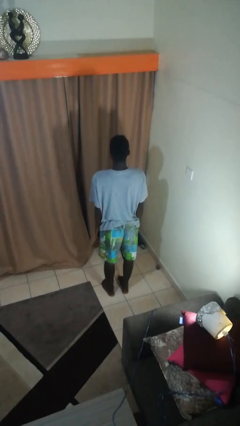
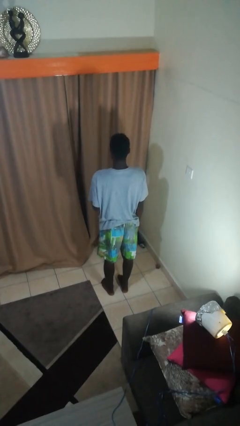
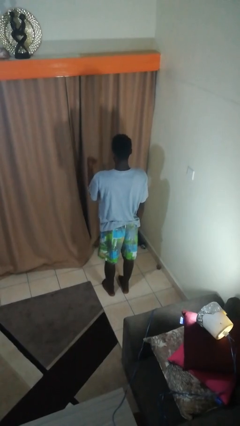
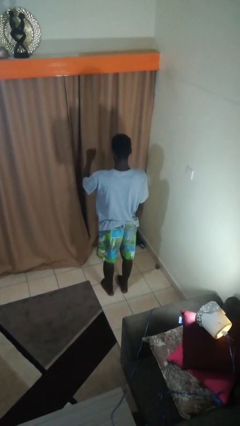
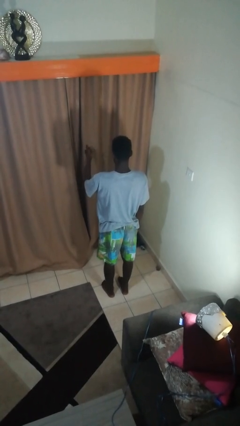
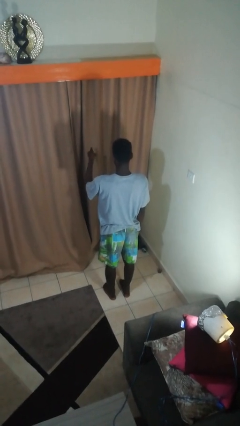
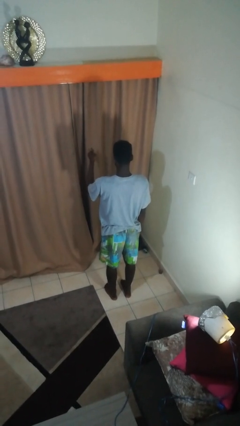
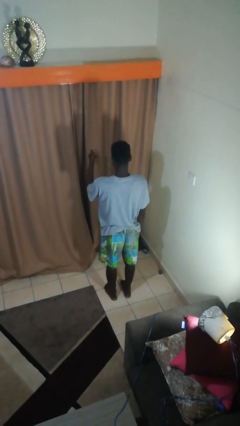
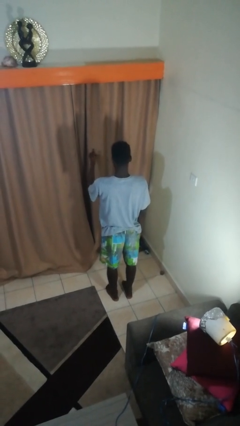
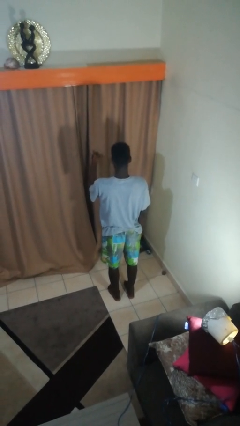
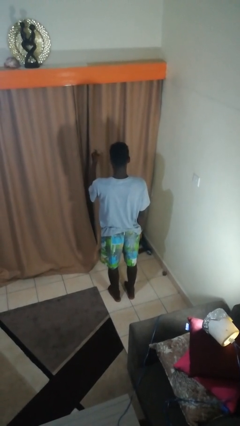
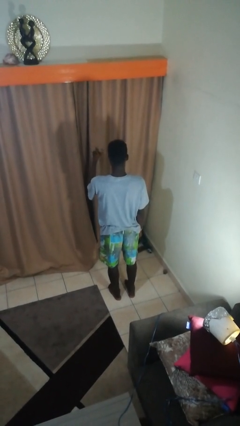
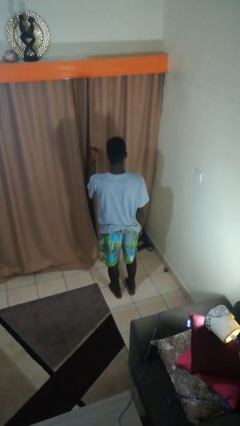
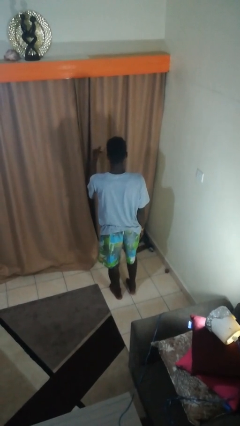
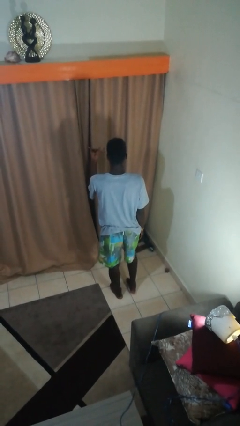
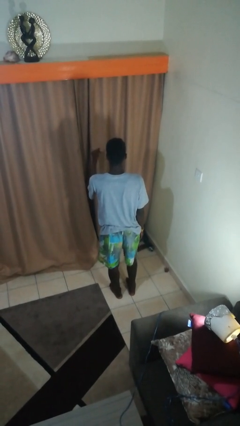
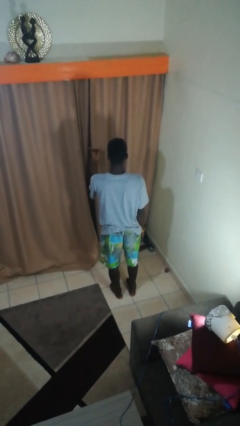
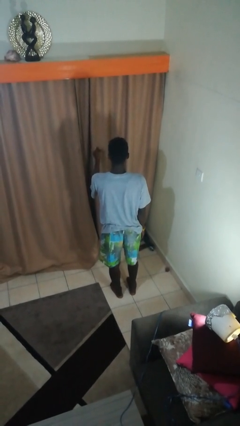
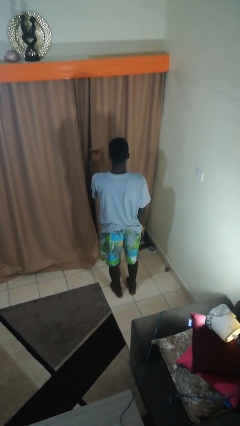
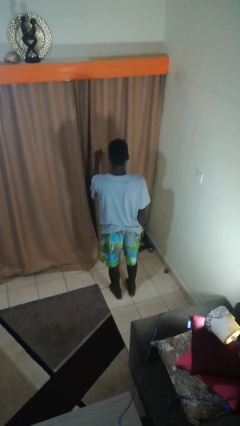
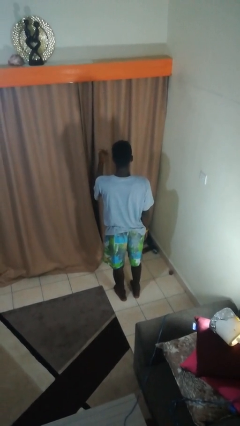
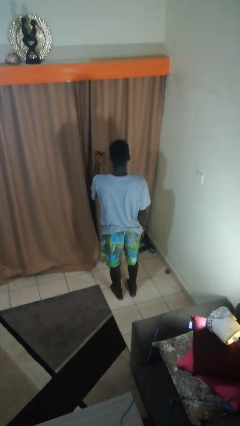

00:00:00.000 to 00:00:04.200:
person gestures hang loose

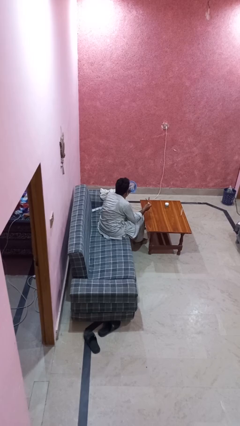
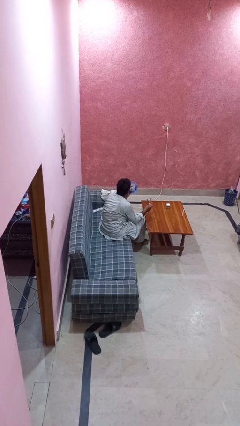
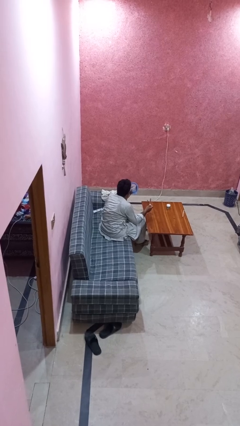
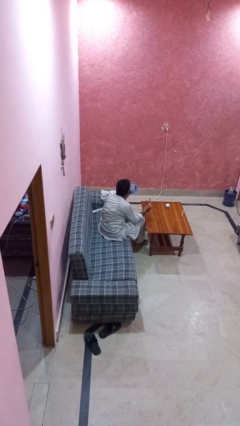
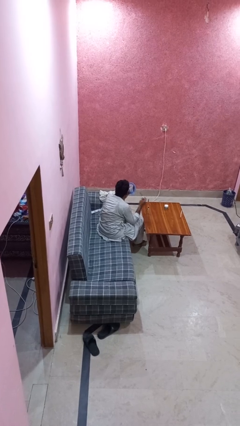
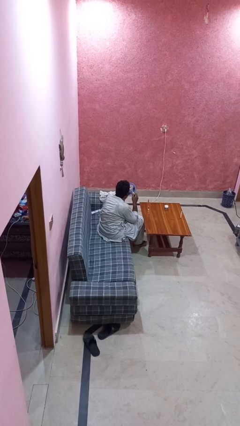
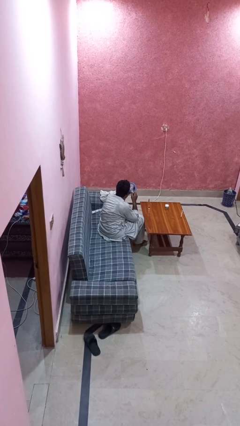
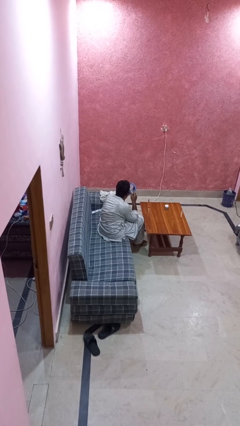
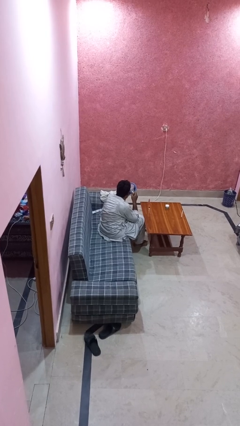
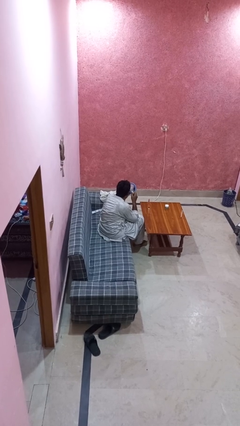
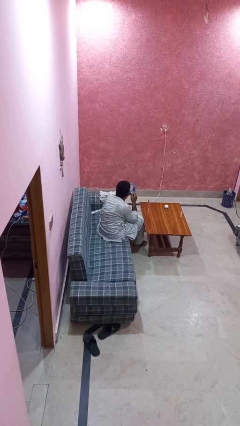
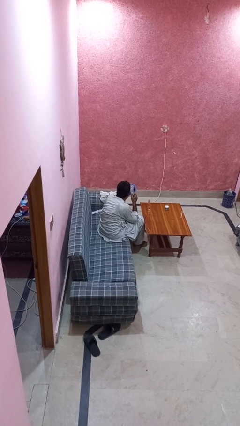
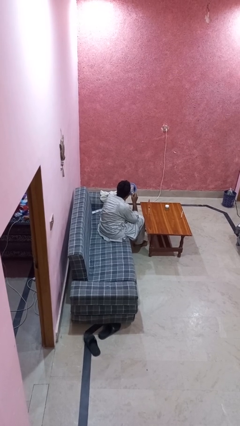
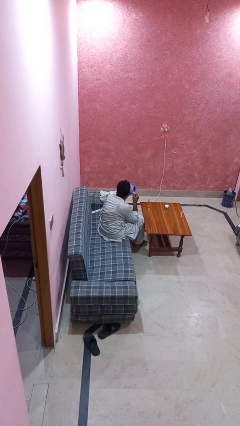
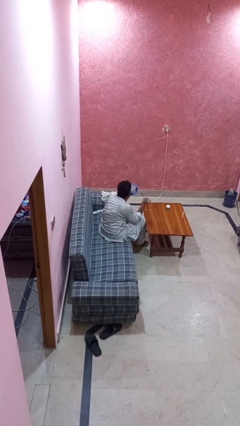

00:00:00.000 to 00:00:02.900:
person applies eye makeup

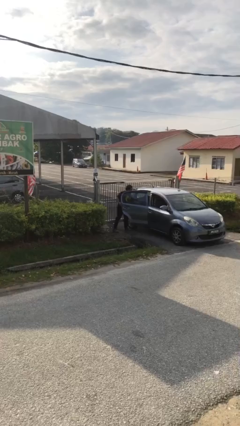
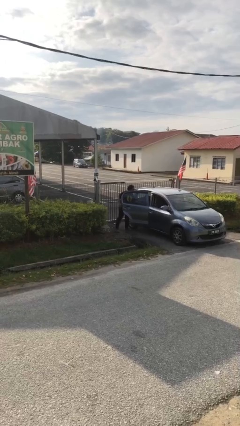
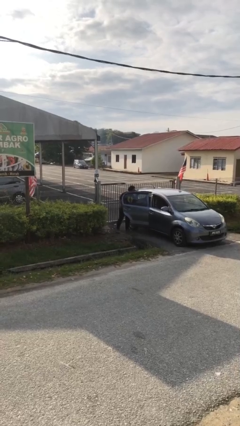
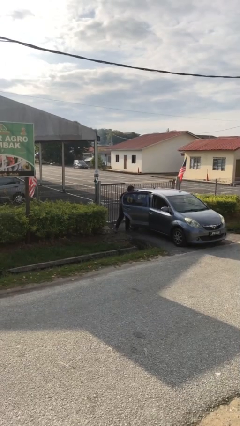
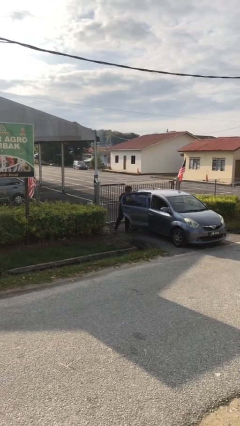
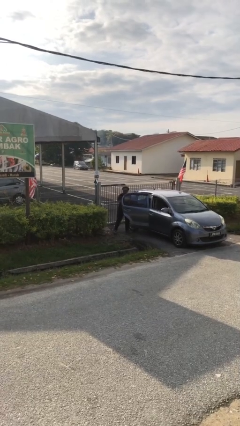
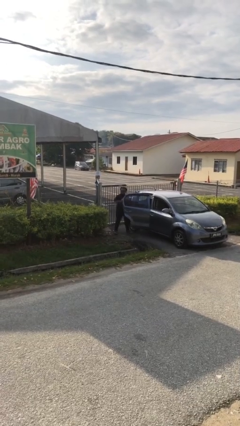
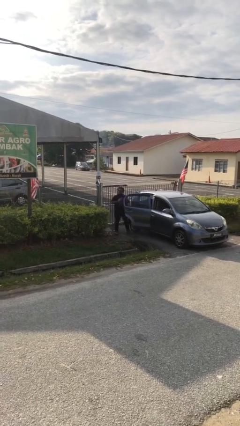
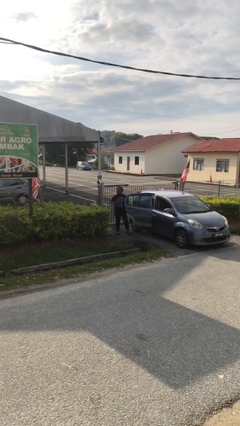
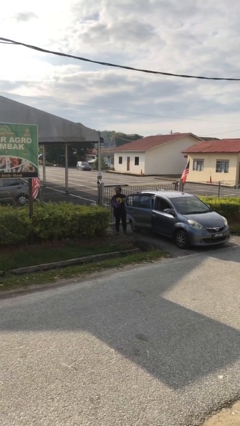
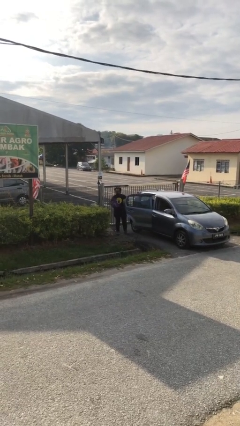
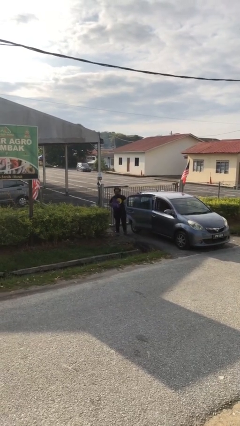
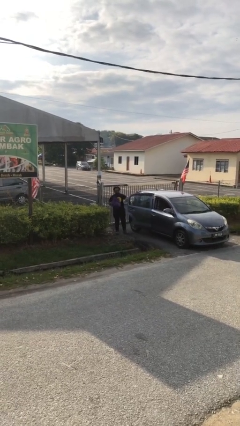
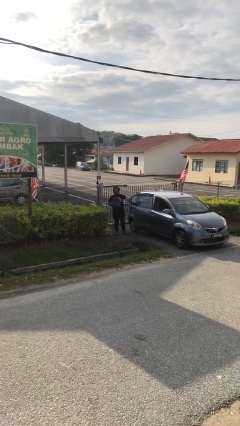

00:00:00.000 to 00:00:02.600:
person unloads car

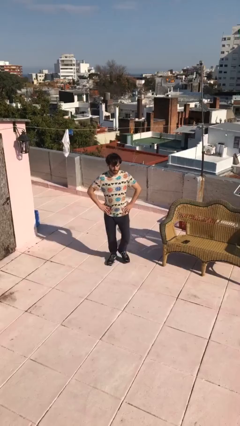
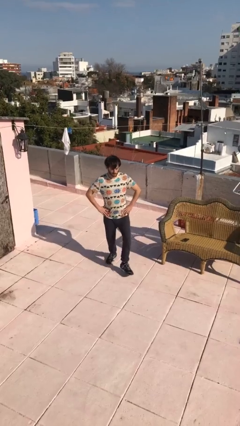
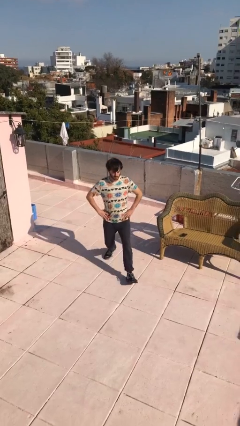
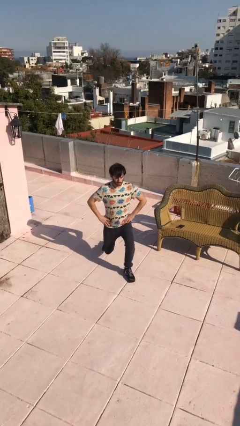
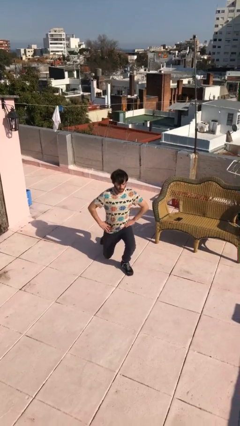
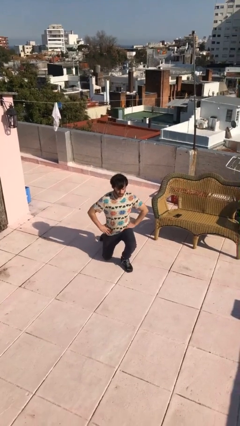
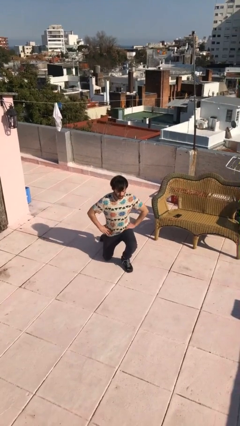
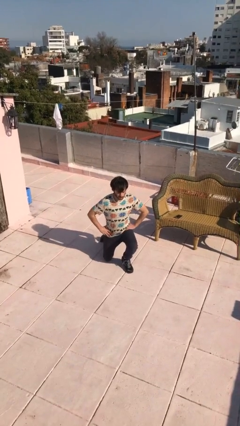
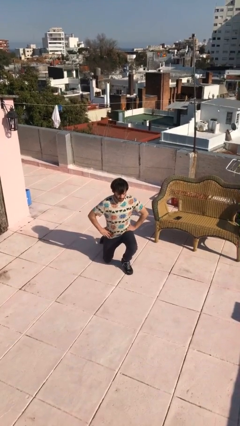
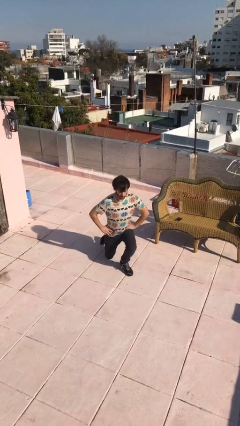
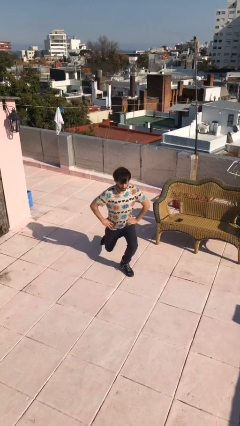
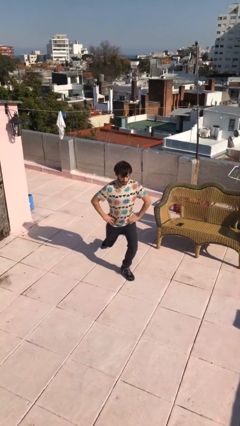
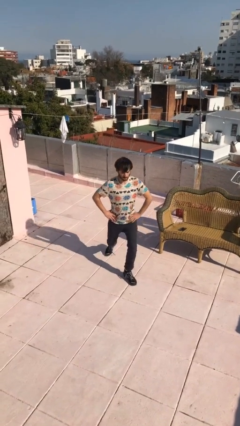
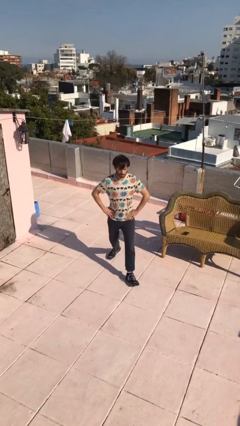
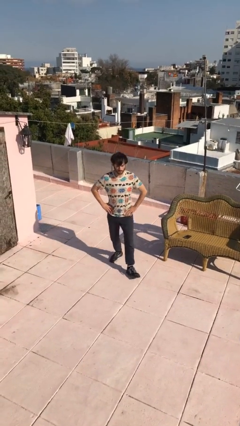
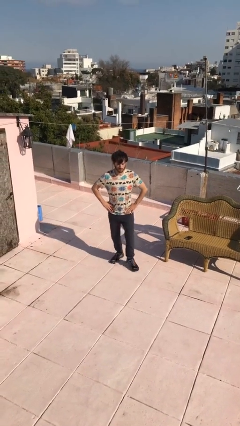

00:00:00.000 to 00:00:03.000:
person exercises with lunges

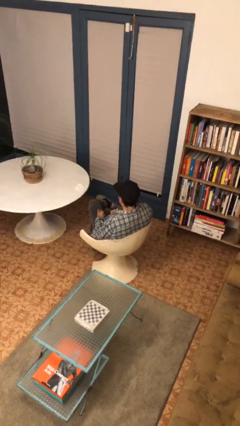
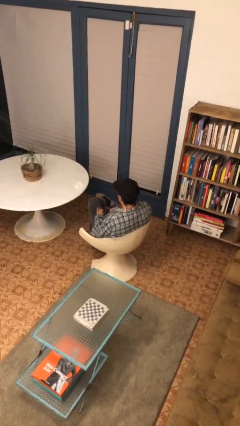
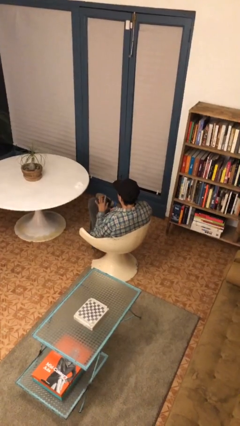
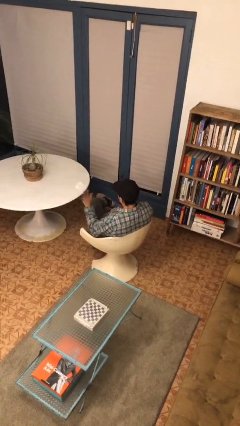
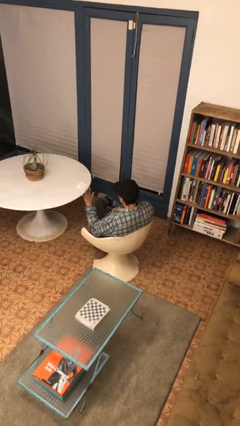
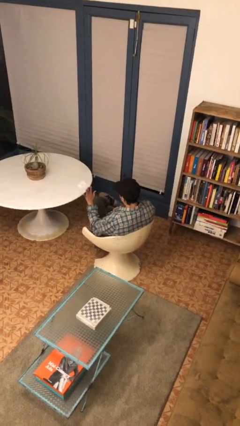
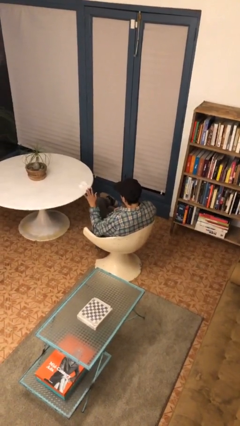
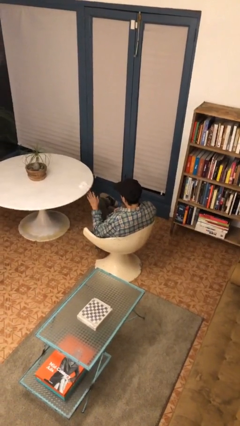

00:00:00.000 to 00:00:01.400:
person gestures stop

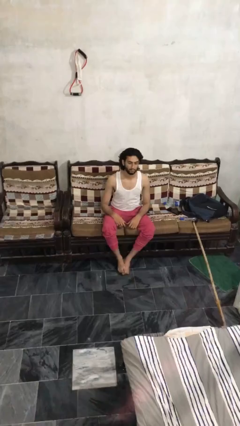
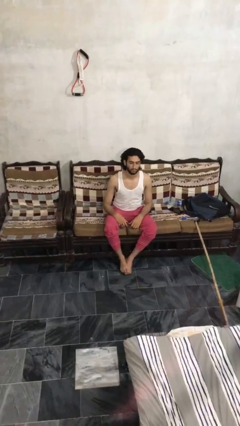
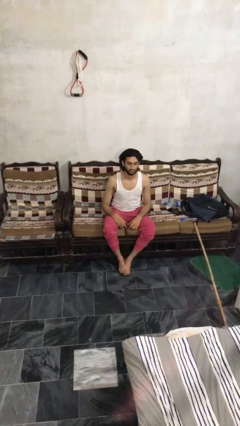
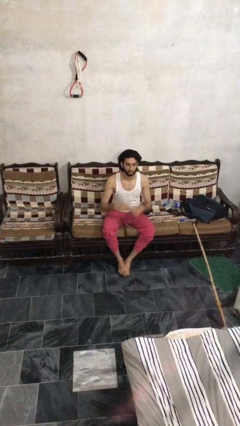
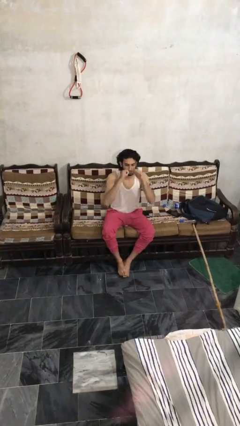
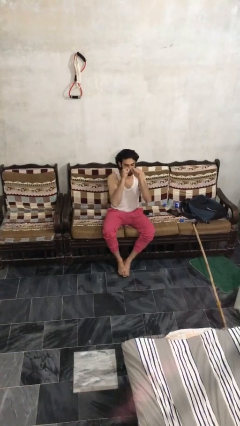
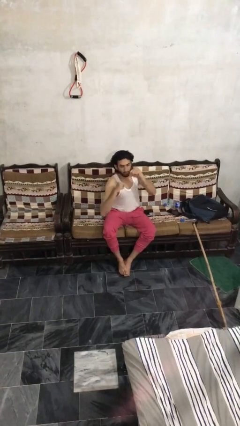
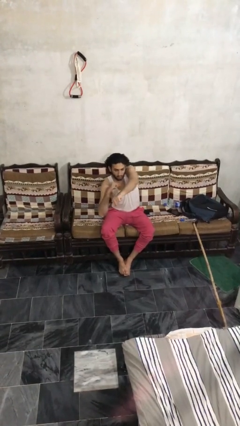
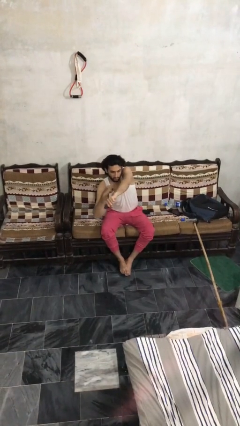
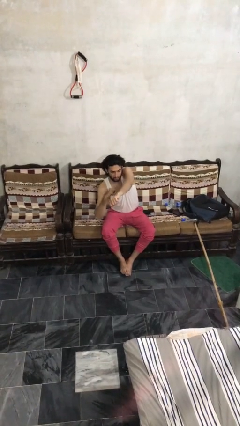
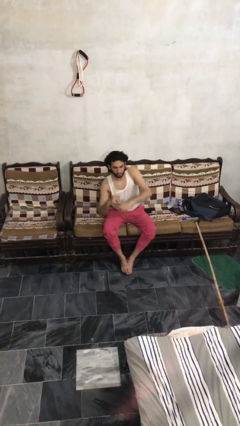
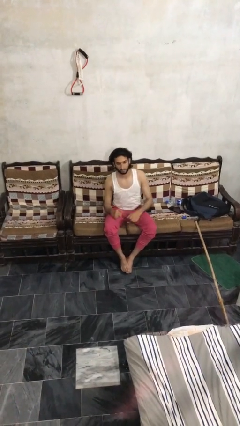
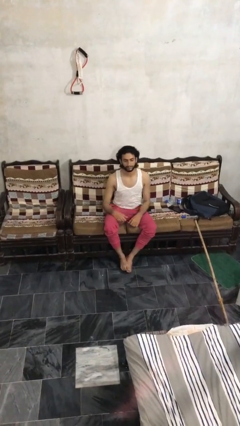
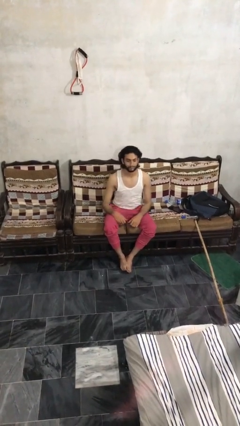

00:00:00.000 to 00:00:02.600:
person punches

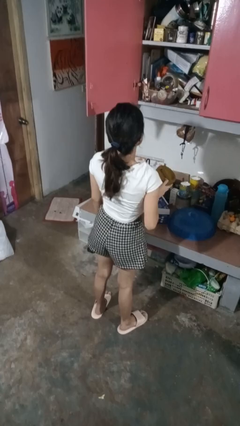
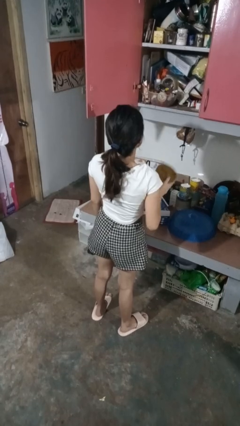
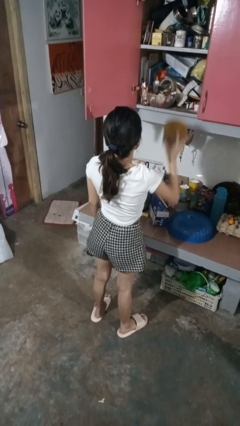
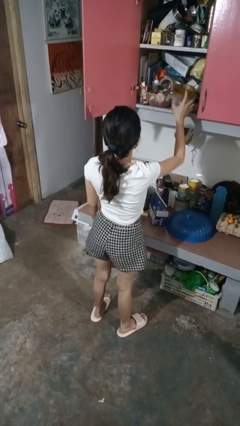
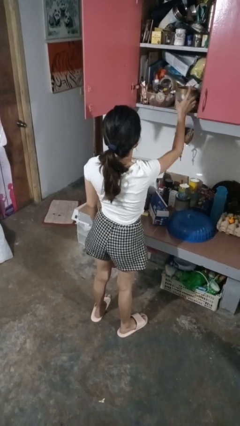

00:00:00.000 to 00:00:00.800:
person puts down object into cabinet
